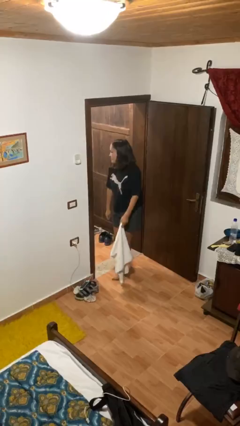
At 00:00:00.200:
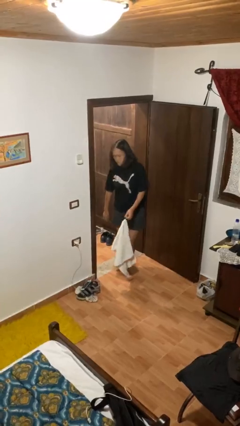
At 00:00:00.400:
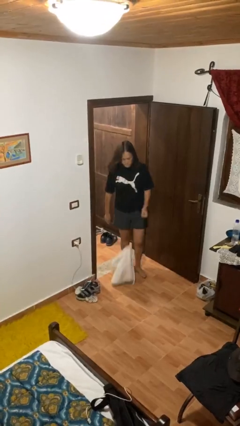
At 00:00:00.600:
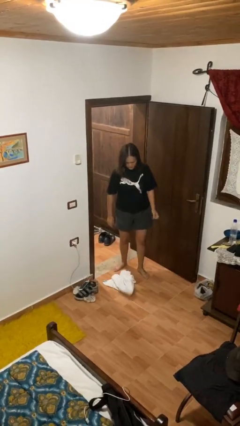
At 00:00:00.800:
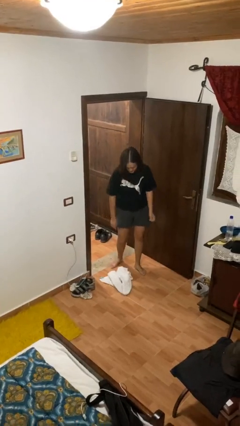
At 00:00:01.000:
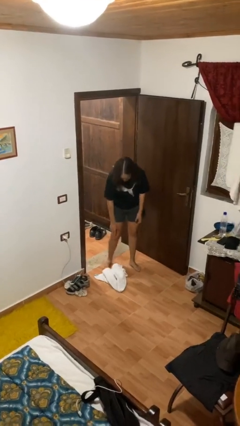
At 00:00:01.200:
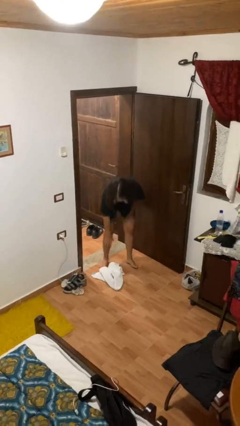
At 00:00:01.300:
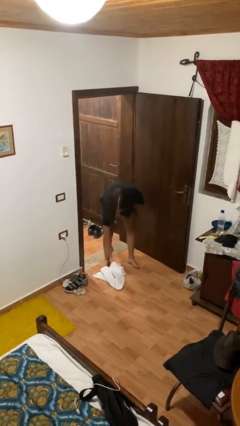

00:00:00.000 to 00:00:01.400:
person drops object

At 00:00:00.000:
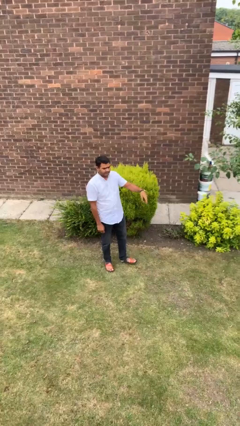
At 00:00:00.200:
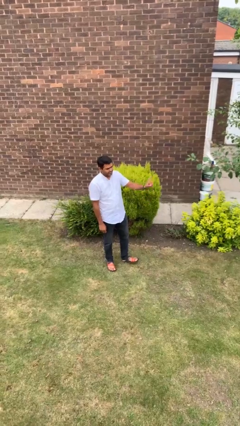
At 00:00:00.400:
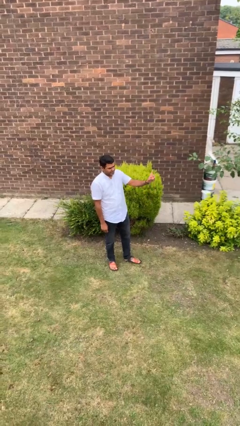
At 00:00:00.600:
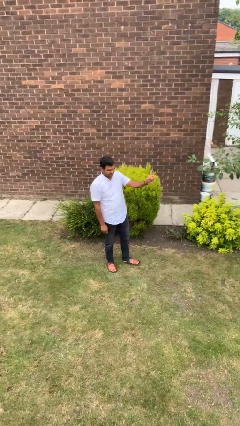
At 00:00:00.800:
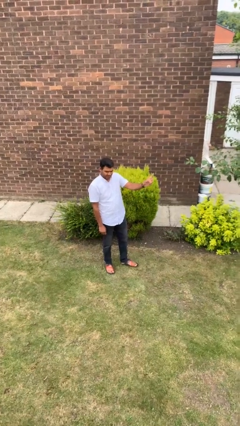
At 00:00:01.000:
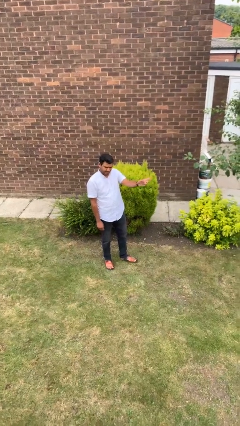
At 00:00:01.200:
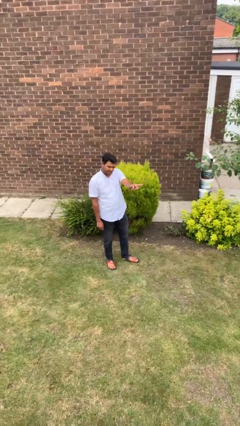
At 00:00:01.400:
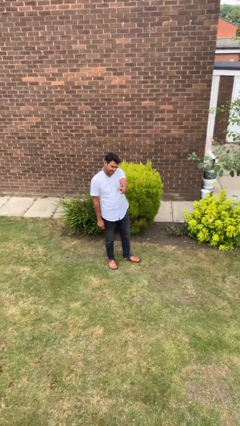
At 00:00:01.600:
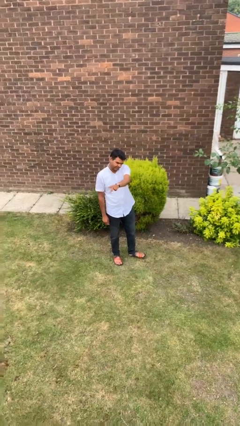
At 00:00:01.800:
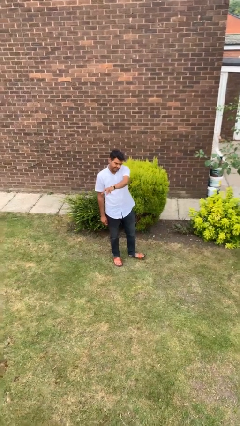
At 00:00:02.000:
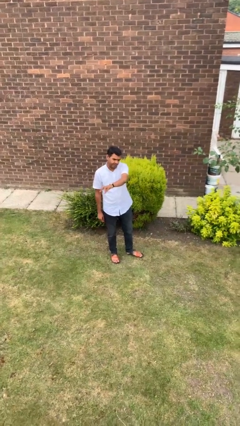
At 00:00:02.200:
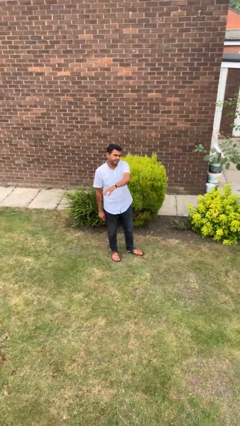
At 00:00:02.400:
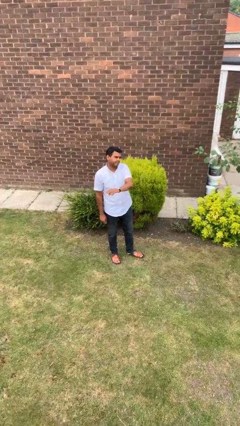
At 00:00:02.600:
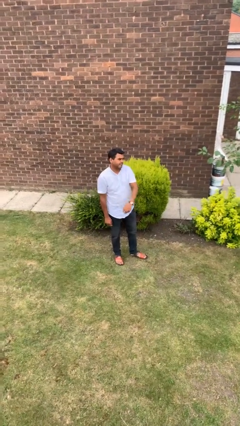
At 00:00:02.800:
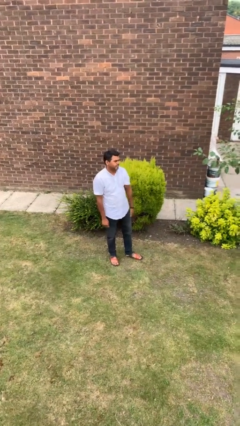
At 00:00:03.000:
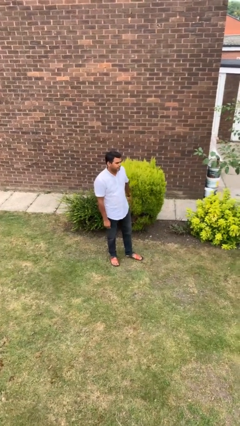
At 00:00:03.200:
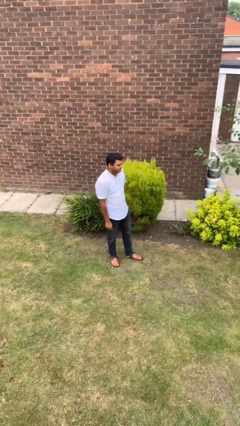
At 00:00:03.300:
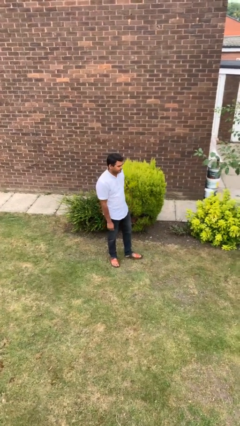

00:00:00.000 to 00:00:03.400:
person gestures swipe right

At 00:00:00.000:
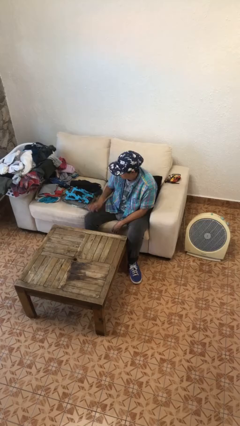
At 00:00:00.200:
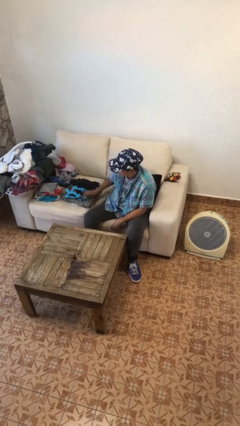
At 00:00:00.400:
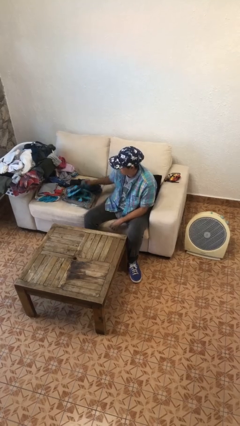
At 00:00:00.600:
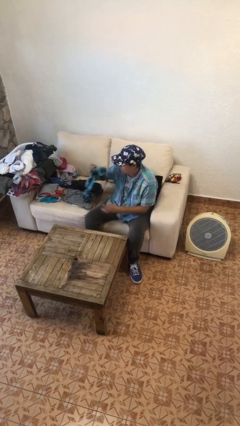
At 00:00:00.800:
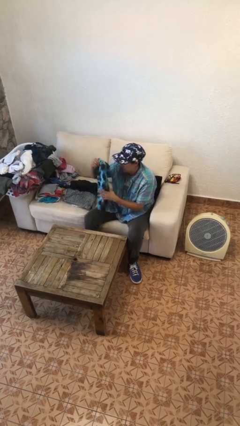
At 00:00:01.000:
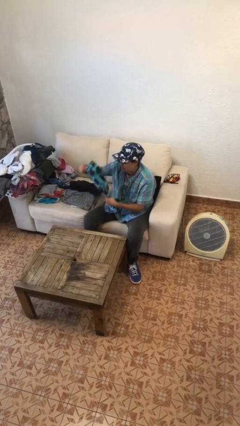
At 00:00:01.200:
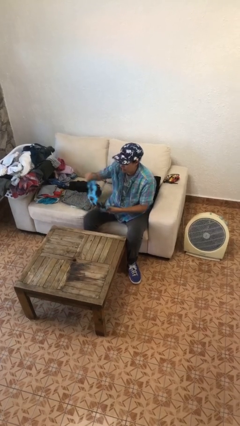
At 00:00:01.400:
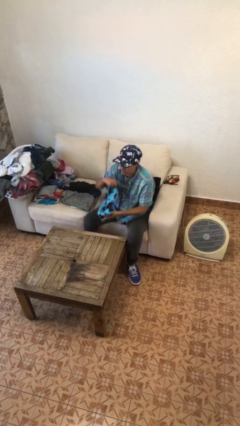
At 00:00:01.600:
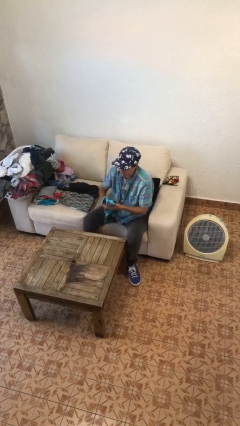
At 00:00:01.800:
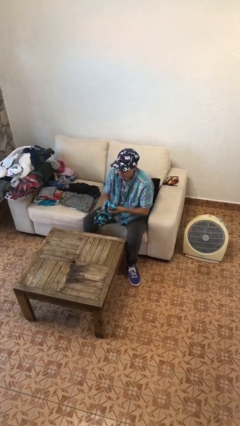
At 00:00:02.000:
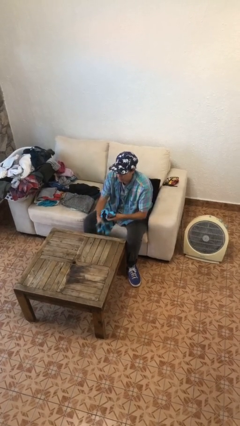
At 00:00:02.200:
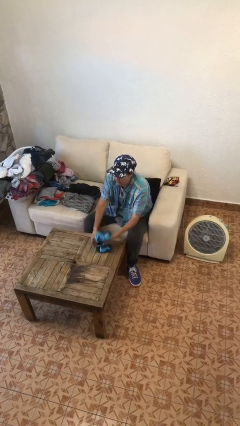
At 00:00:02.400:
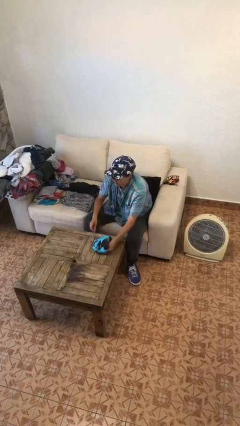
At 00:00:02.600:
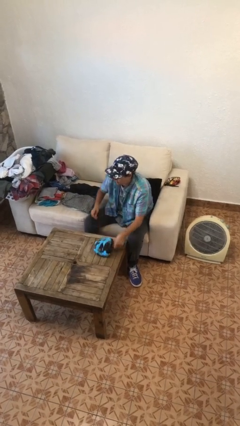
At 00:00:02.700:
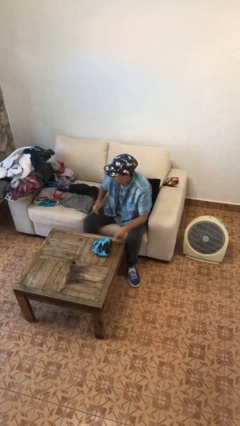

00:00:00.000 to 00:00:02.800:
person folds pants

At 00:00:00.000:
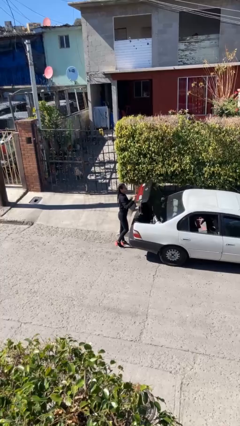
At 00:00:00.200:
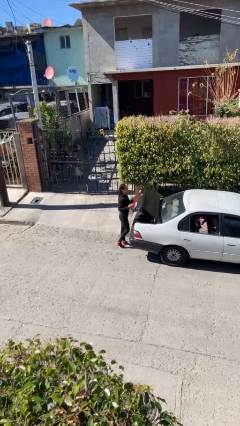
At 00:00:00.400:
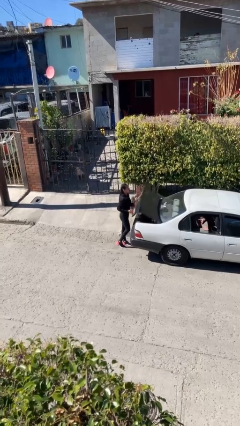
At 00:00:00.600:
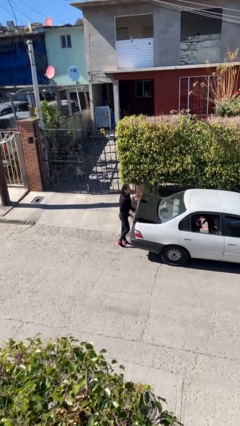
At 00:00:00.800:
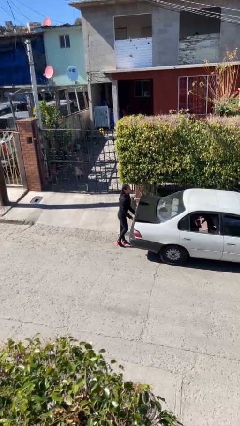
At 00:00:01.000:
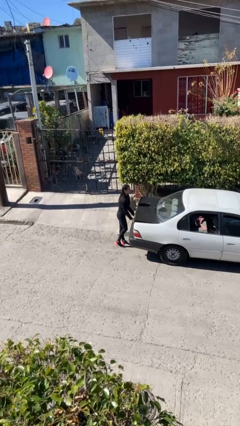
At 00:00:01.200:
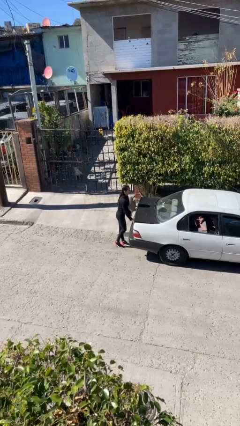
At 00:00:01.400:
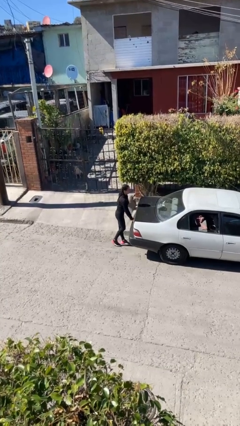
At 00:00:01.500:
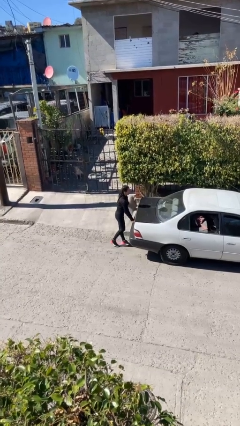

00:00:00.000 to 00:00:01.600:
person closes car trunk

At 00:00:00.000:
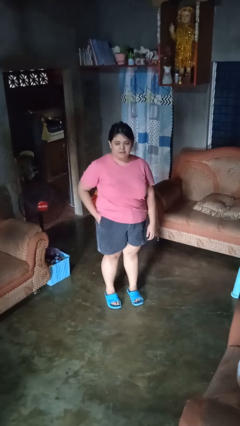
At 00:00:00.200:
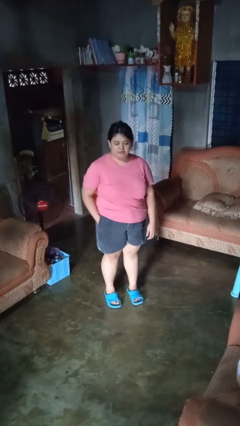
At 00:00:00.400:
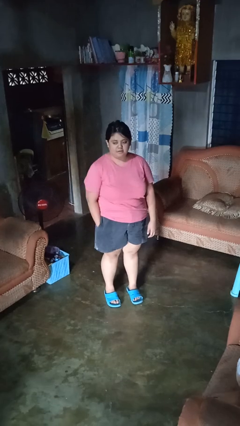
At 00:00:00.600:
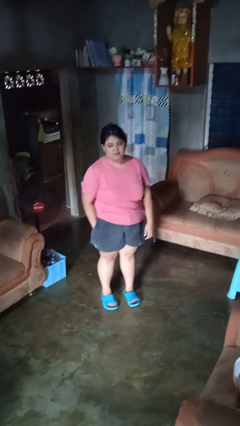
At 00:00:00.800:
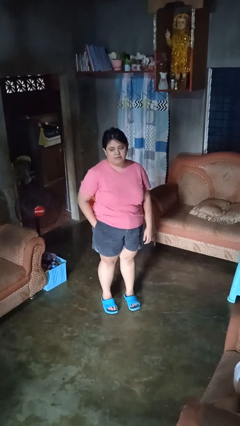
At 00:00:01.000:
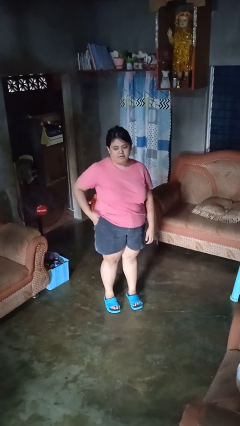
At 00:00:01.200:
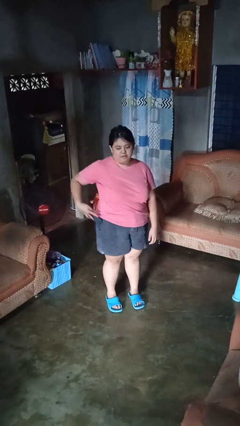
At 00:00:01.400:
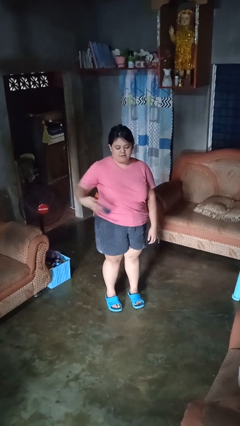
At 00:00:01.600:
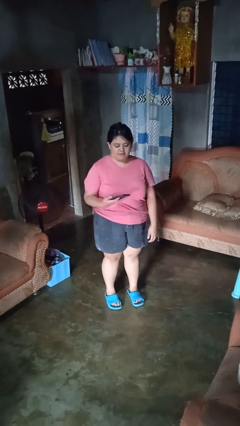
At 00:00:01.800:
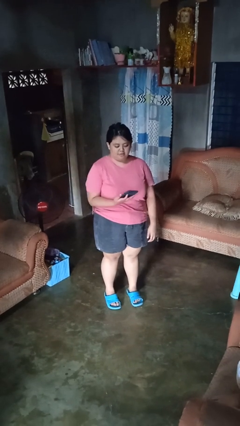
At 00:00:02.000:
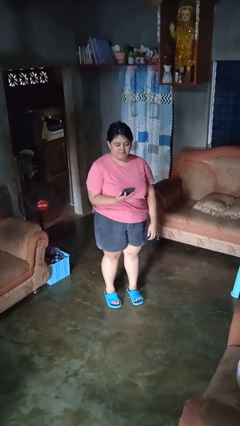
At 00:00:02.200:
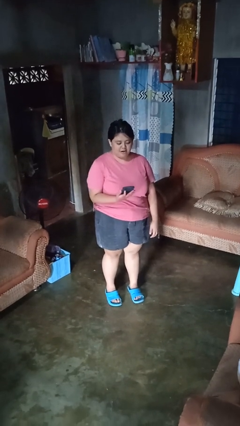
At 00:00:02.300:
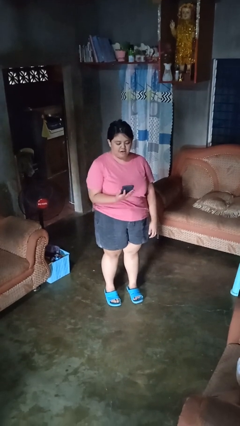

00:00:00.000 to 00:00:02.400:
person takes phone from pocket

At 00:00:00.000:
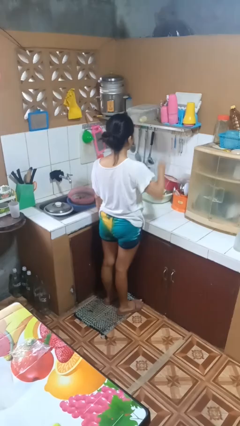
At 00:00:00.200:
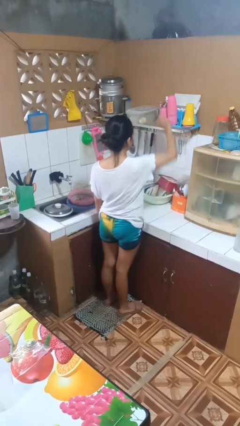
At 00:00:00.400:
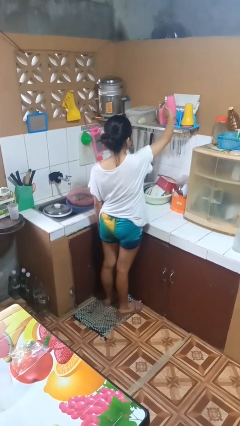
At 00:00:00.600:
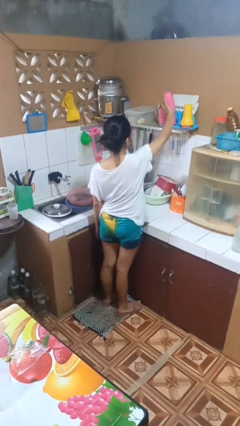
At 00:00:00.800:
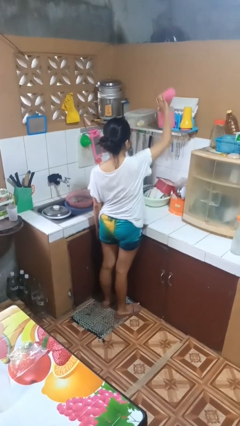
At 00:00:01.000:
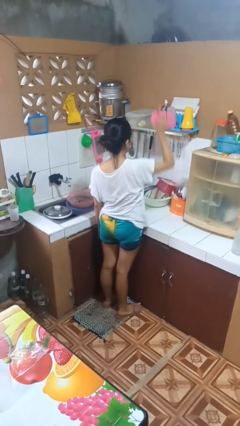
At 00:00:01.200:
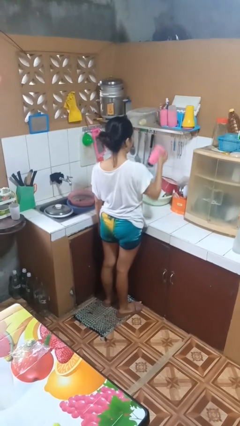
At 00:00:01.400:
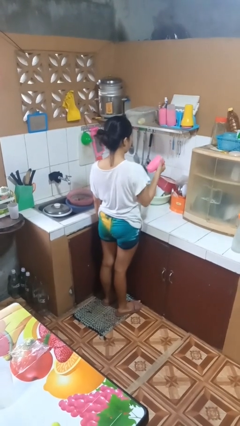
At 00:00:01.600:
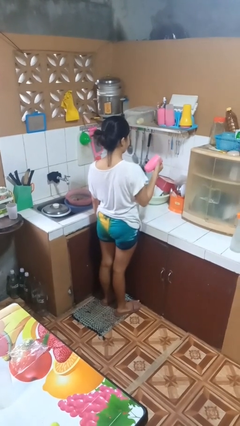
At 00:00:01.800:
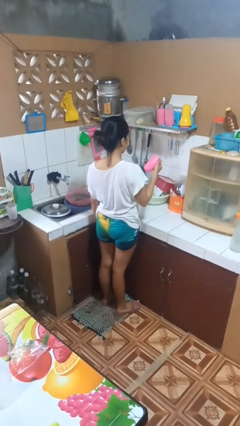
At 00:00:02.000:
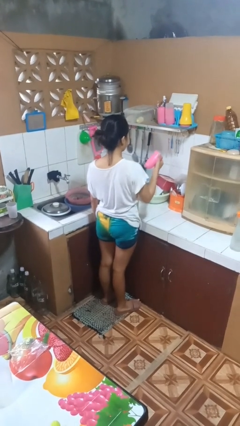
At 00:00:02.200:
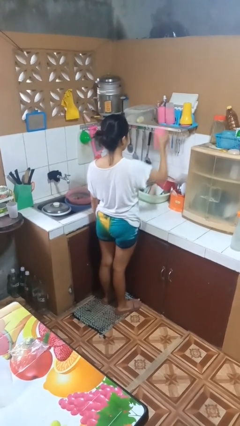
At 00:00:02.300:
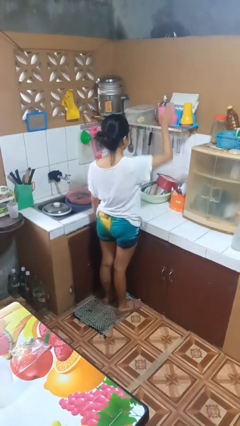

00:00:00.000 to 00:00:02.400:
person picks up object from shelf

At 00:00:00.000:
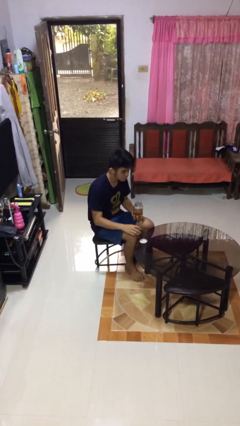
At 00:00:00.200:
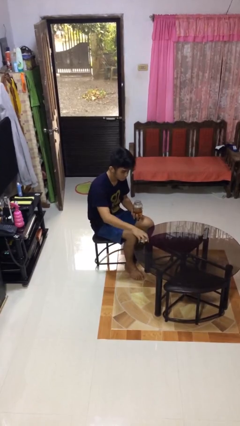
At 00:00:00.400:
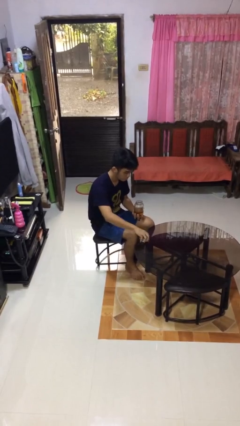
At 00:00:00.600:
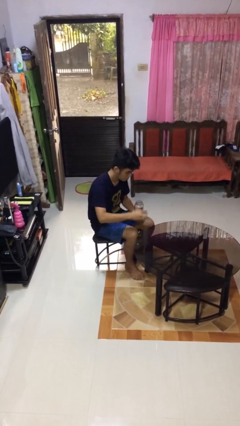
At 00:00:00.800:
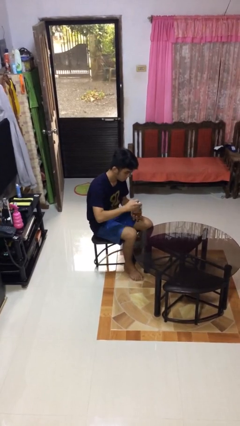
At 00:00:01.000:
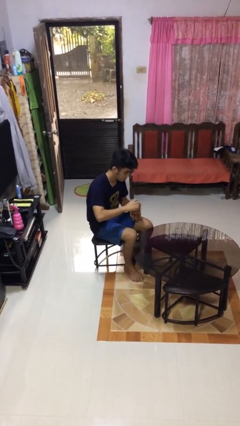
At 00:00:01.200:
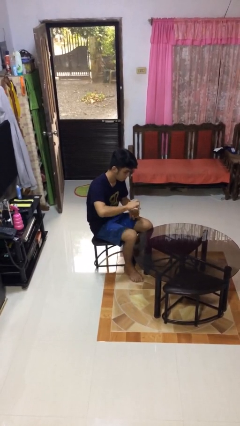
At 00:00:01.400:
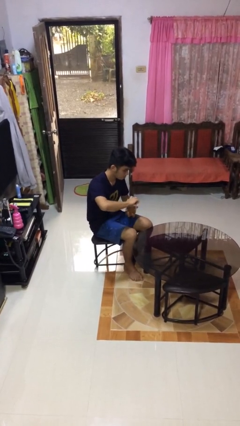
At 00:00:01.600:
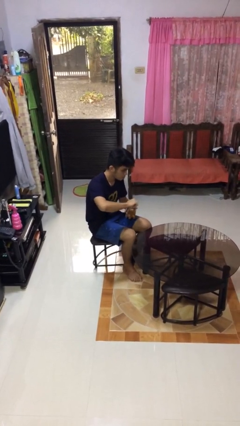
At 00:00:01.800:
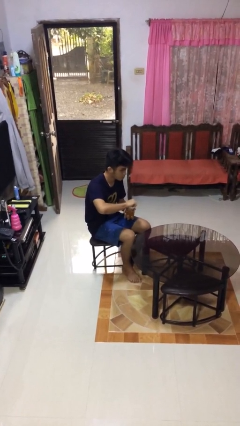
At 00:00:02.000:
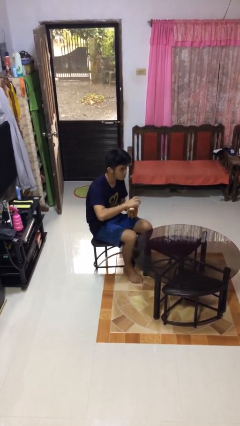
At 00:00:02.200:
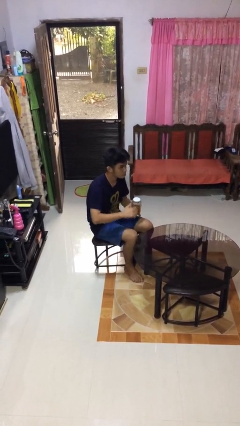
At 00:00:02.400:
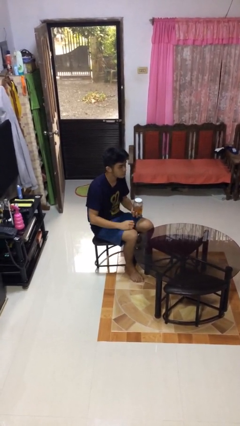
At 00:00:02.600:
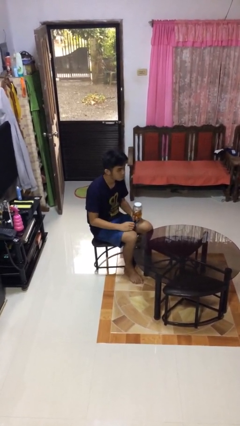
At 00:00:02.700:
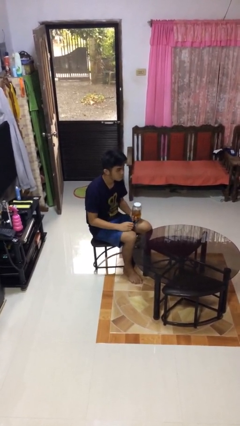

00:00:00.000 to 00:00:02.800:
person closes jar
